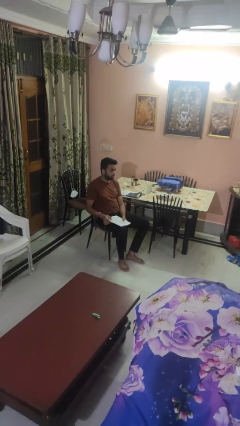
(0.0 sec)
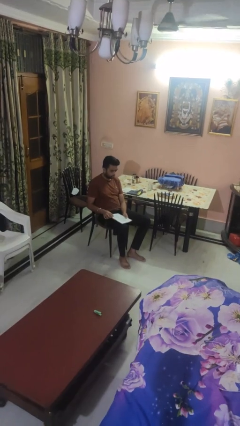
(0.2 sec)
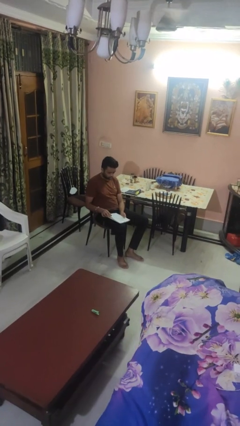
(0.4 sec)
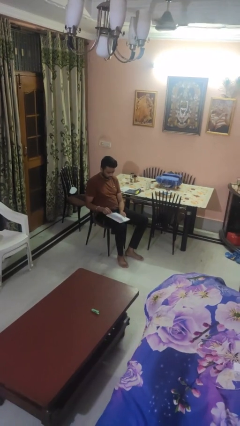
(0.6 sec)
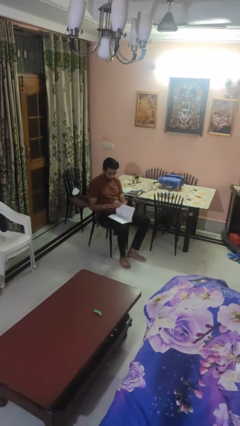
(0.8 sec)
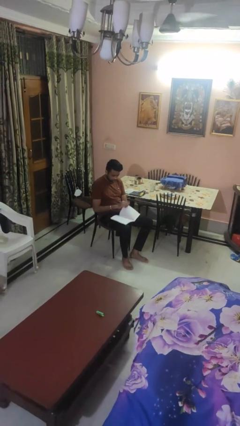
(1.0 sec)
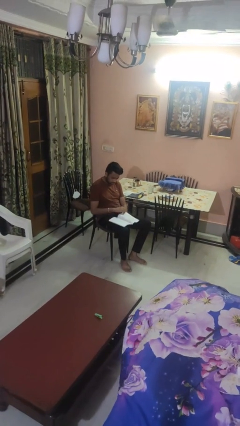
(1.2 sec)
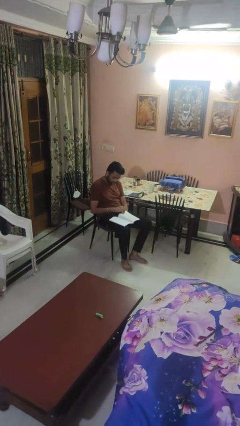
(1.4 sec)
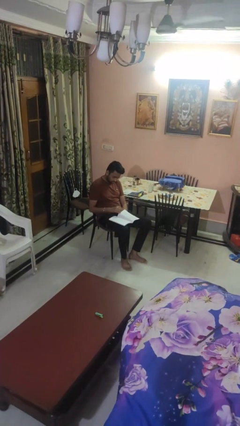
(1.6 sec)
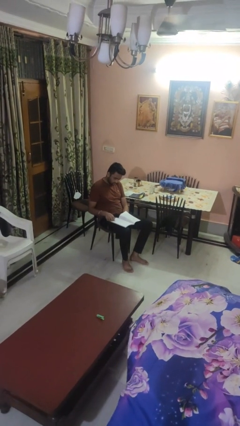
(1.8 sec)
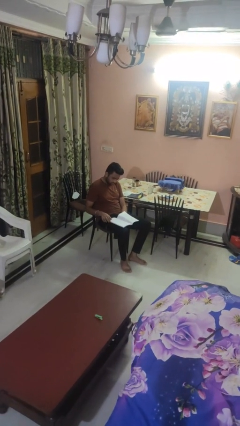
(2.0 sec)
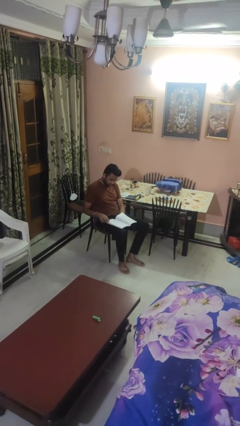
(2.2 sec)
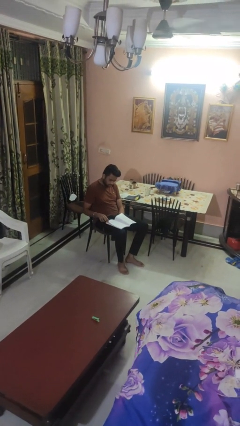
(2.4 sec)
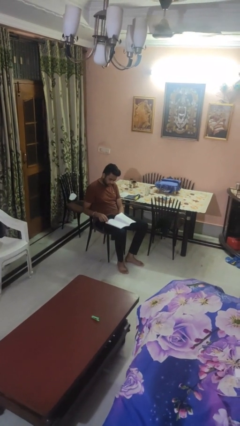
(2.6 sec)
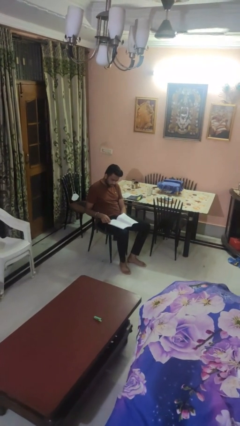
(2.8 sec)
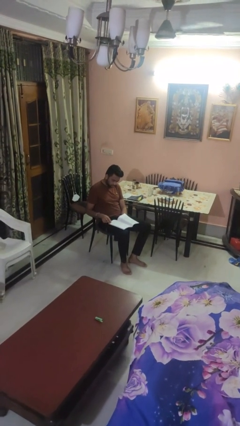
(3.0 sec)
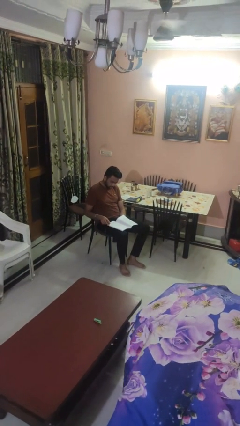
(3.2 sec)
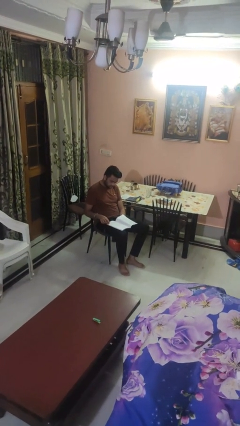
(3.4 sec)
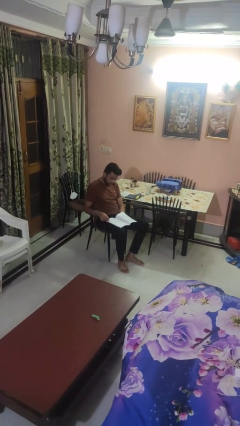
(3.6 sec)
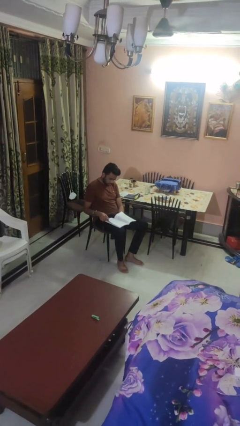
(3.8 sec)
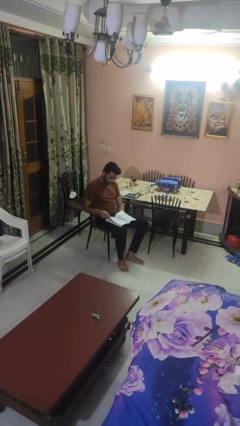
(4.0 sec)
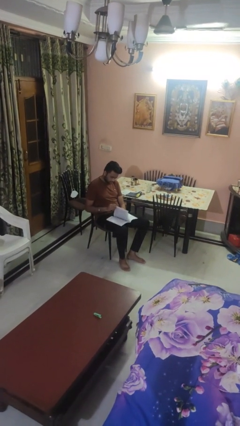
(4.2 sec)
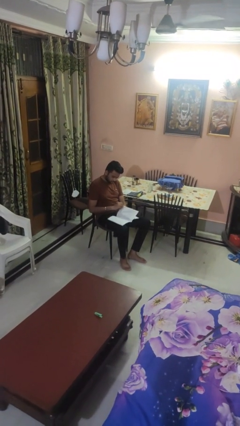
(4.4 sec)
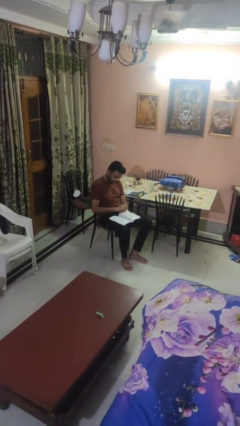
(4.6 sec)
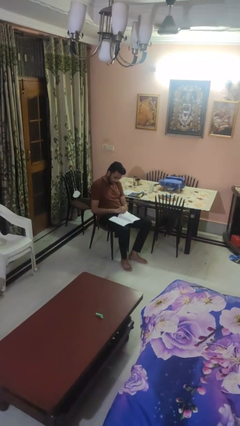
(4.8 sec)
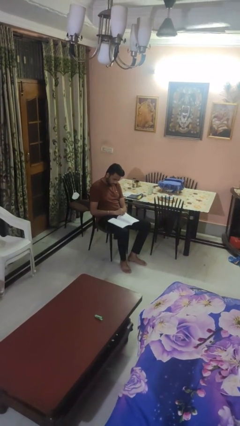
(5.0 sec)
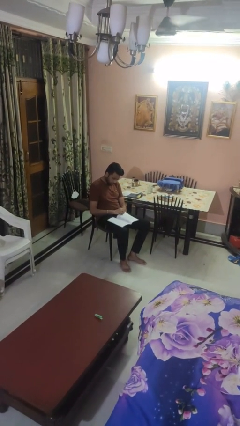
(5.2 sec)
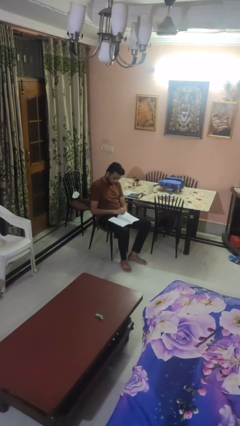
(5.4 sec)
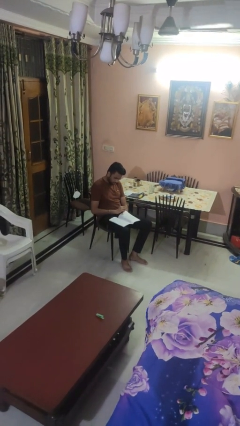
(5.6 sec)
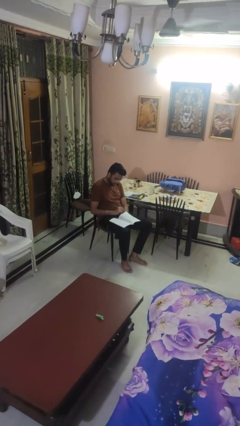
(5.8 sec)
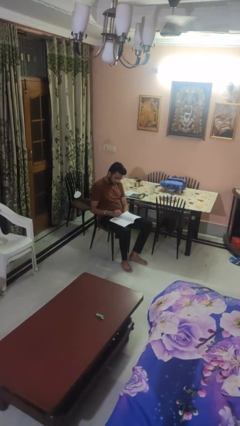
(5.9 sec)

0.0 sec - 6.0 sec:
person reads magazine

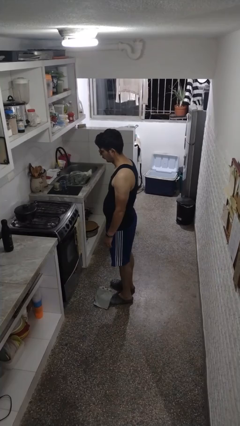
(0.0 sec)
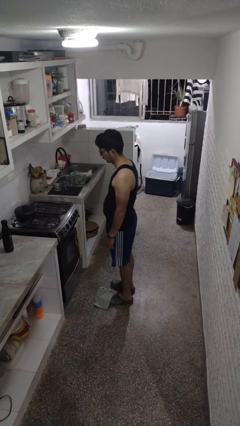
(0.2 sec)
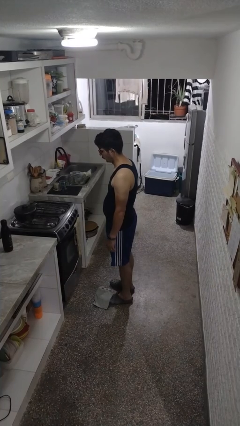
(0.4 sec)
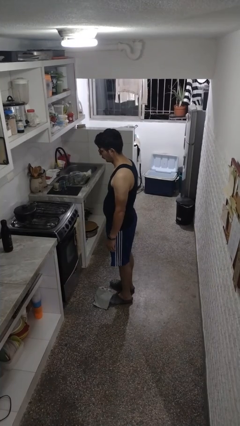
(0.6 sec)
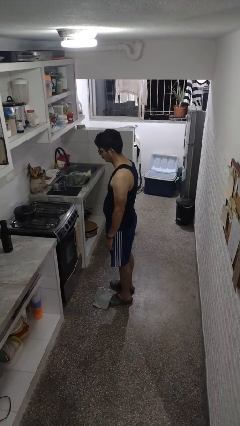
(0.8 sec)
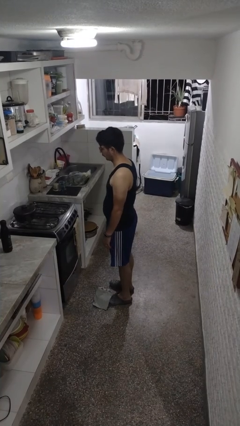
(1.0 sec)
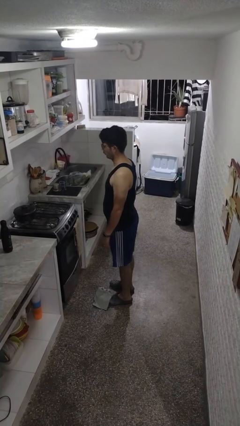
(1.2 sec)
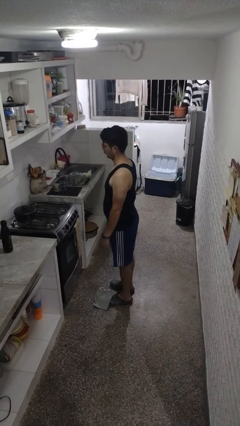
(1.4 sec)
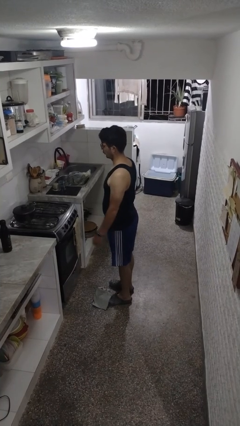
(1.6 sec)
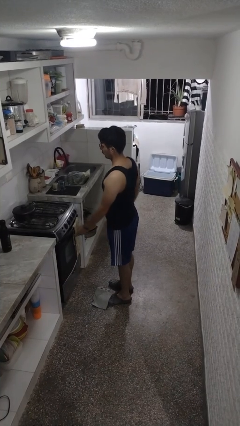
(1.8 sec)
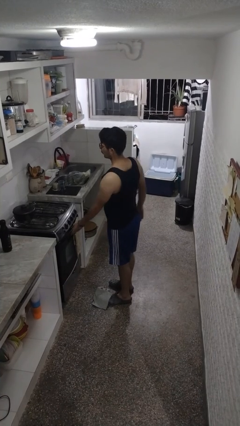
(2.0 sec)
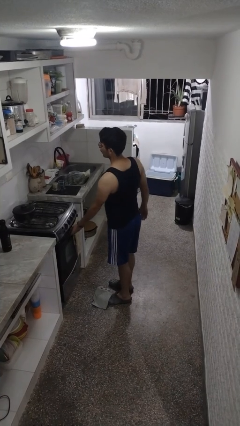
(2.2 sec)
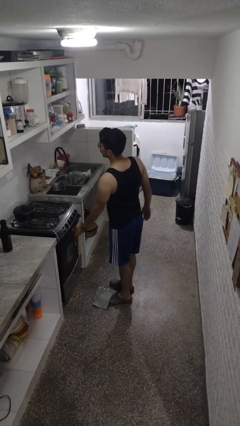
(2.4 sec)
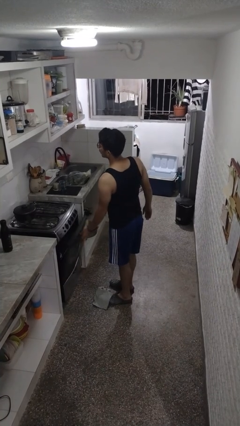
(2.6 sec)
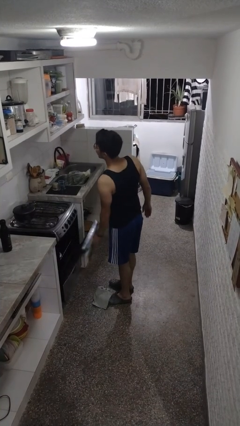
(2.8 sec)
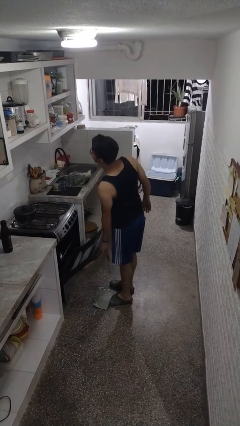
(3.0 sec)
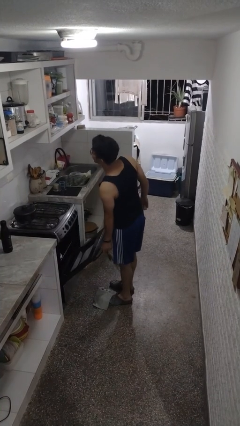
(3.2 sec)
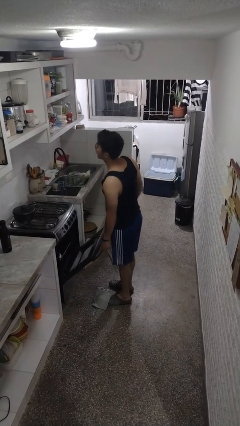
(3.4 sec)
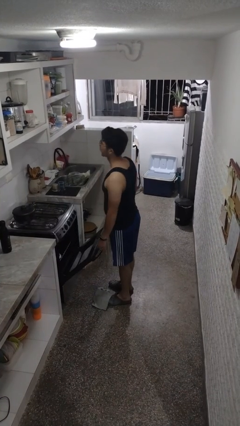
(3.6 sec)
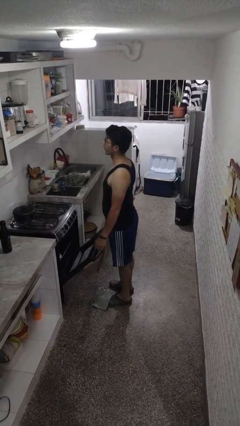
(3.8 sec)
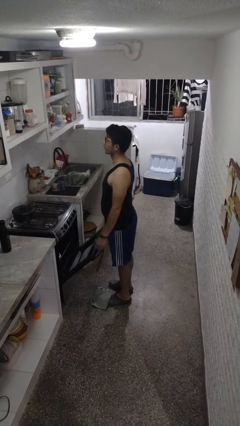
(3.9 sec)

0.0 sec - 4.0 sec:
person opens oven door

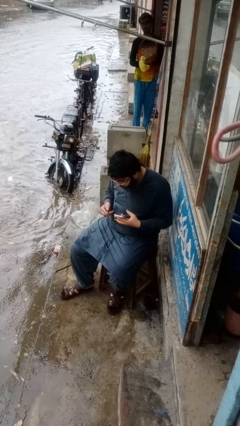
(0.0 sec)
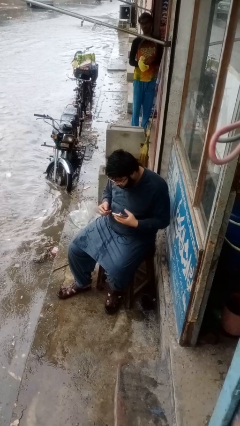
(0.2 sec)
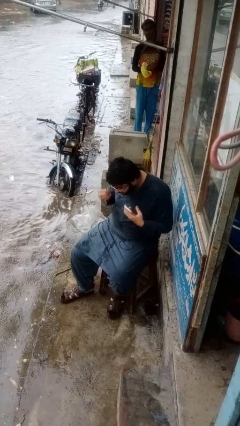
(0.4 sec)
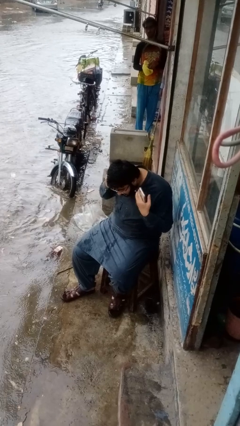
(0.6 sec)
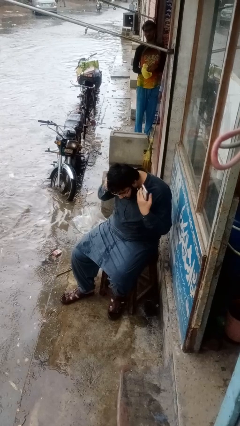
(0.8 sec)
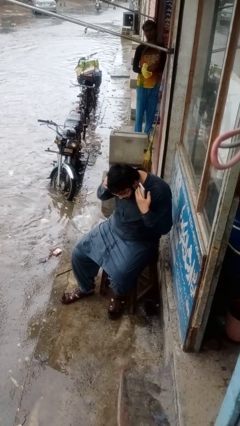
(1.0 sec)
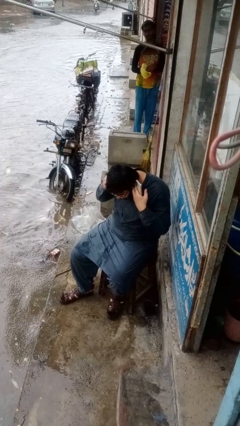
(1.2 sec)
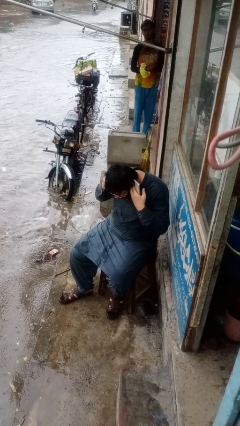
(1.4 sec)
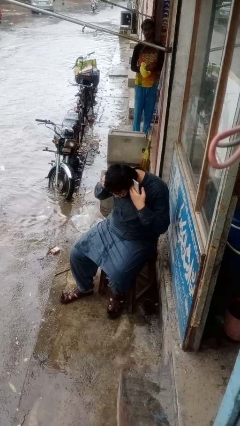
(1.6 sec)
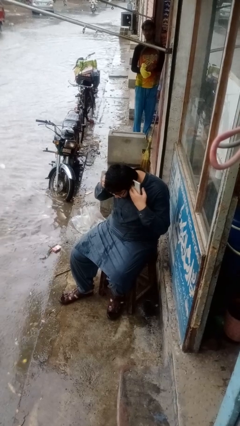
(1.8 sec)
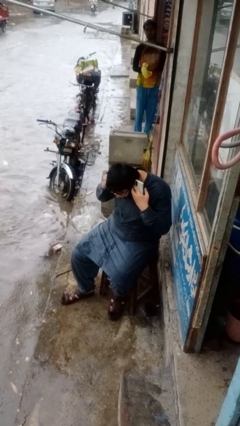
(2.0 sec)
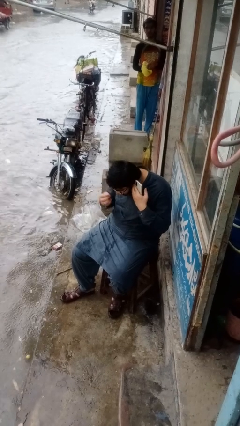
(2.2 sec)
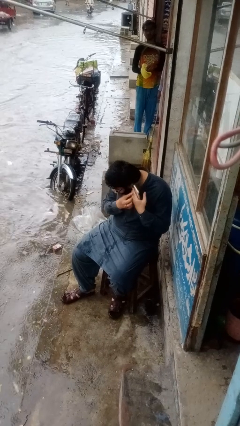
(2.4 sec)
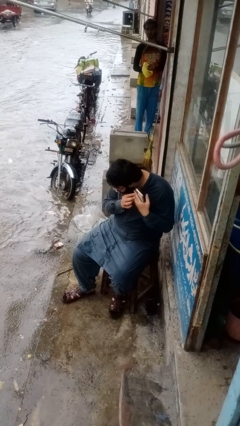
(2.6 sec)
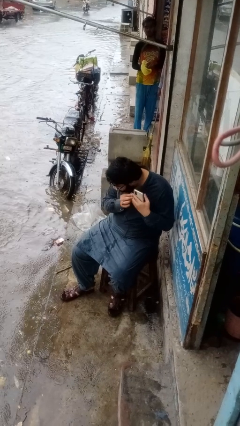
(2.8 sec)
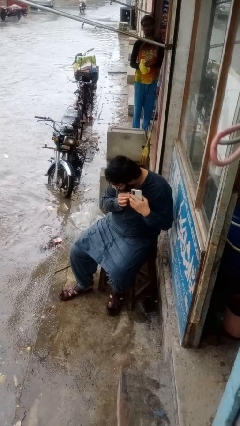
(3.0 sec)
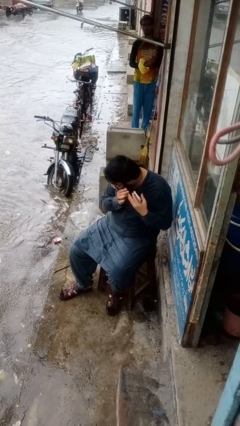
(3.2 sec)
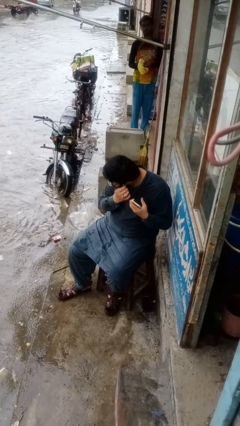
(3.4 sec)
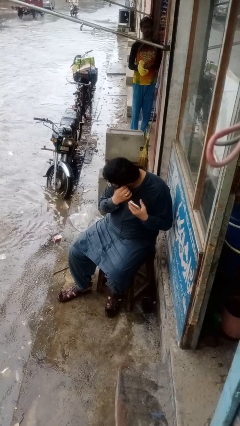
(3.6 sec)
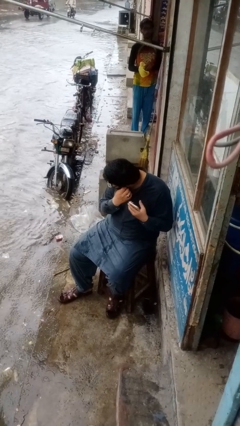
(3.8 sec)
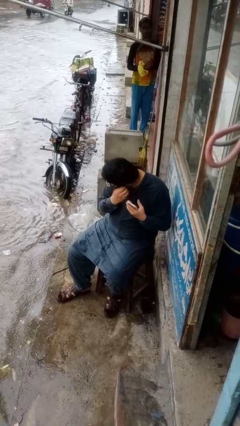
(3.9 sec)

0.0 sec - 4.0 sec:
person puts on headphones

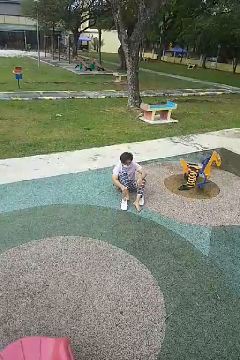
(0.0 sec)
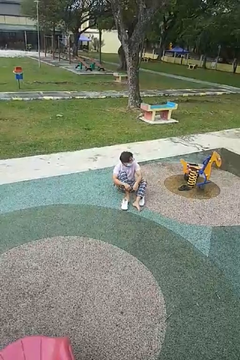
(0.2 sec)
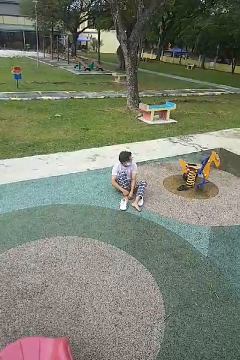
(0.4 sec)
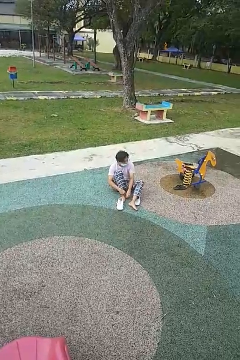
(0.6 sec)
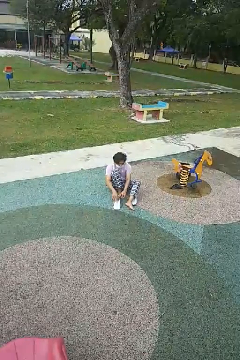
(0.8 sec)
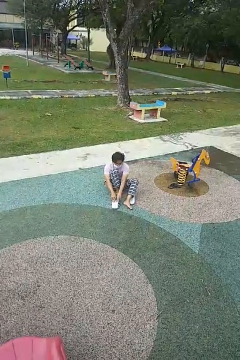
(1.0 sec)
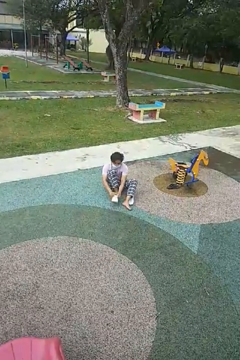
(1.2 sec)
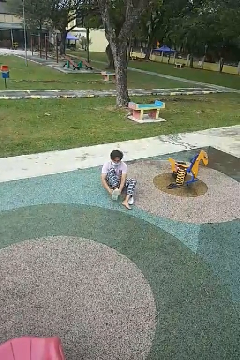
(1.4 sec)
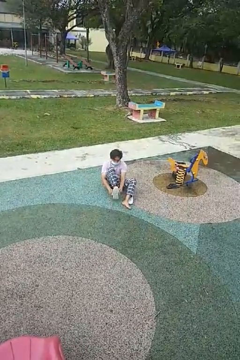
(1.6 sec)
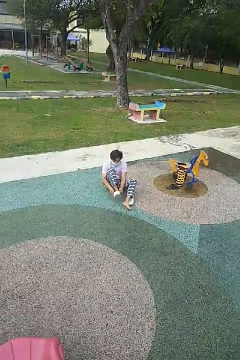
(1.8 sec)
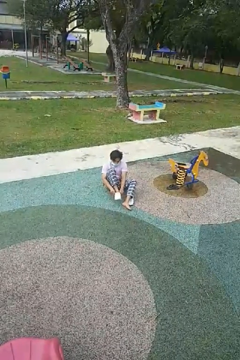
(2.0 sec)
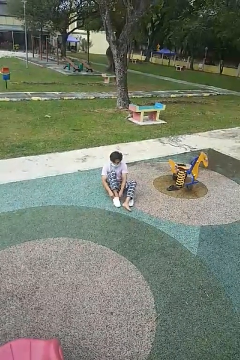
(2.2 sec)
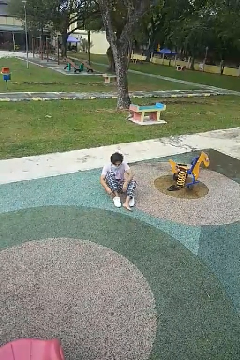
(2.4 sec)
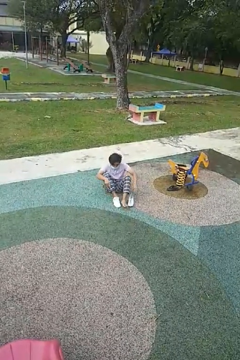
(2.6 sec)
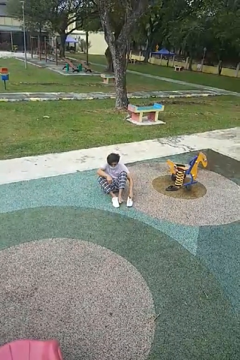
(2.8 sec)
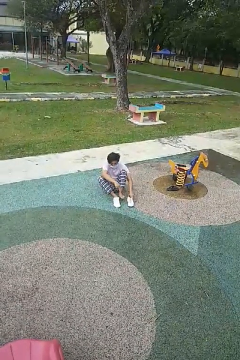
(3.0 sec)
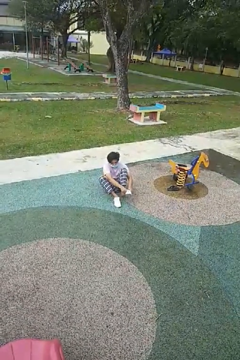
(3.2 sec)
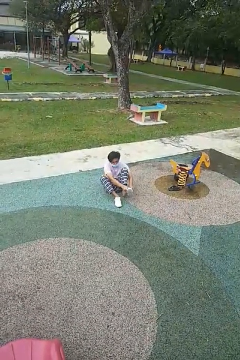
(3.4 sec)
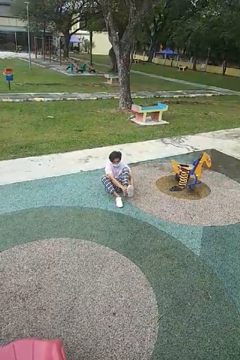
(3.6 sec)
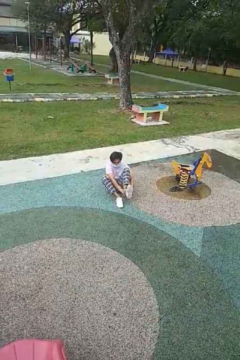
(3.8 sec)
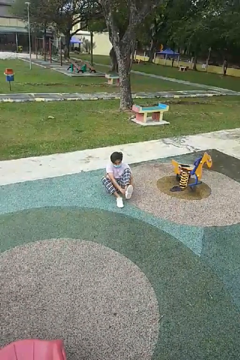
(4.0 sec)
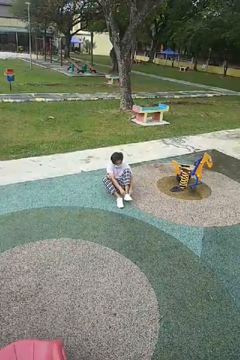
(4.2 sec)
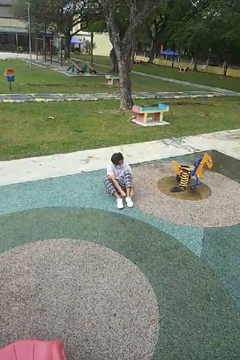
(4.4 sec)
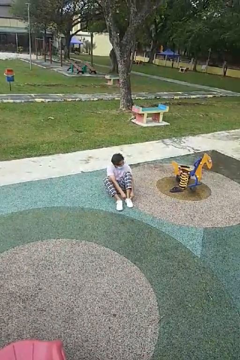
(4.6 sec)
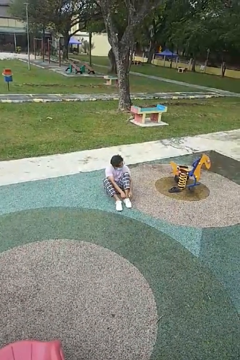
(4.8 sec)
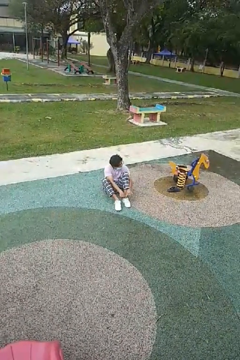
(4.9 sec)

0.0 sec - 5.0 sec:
person puts on shoes
